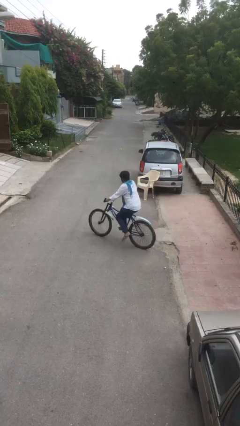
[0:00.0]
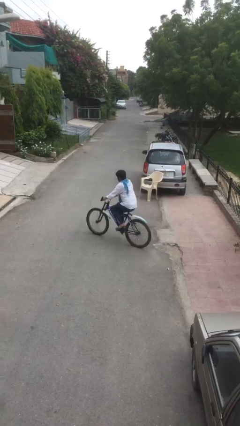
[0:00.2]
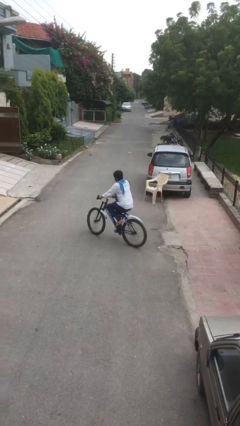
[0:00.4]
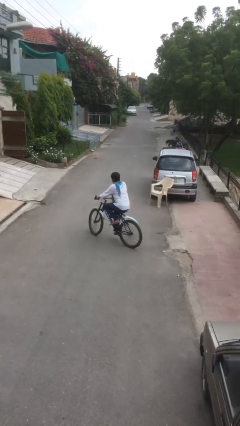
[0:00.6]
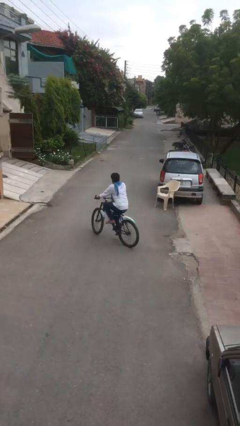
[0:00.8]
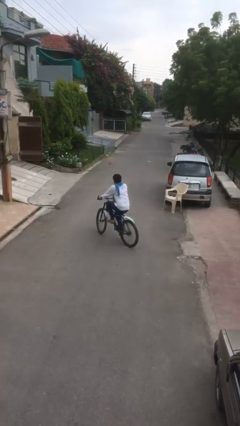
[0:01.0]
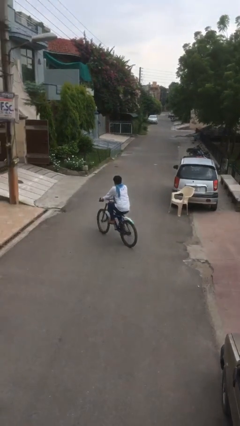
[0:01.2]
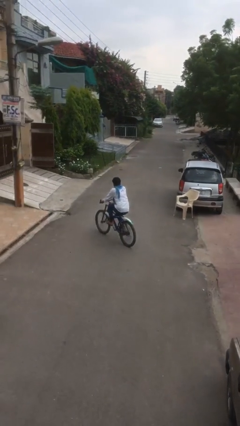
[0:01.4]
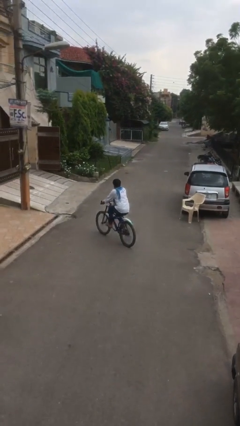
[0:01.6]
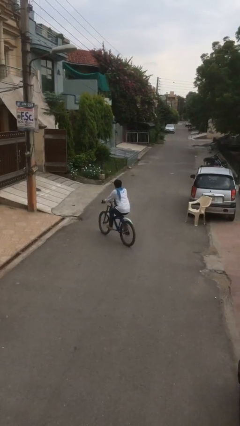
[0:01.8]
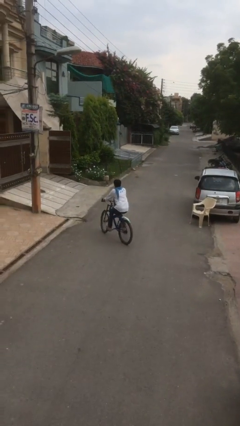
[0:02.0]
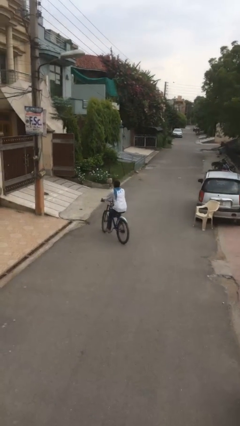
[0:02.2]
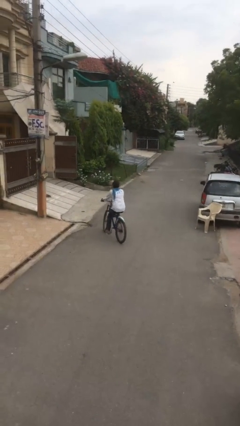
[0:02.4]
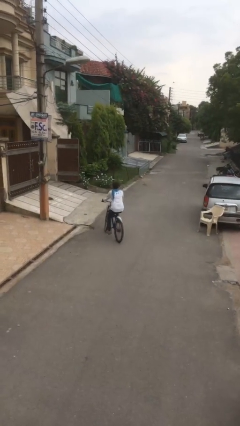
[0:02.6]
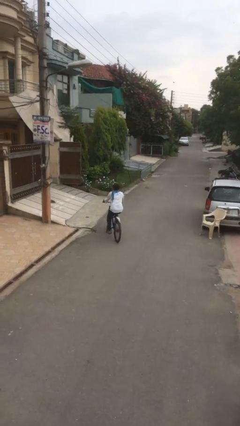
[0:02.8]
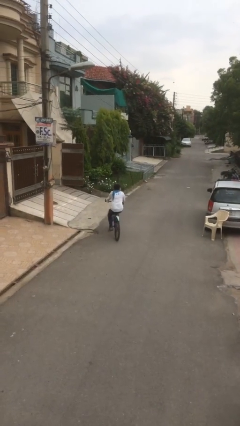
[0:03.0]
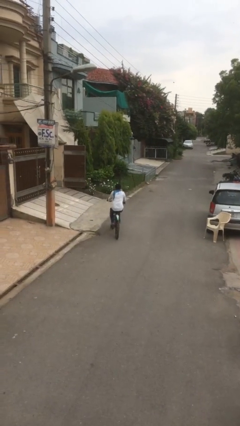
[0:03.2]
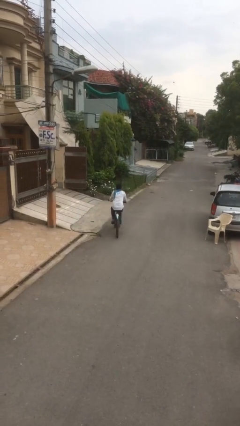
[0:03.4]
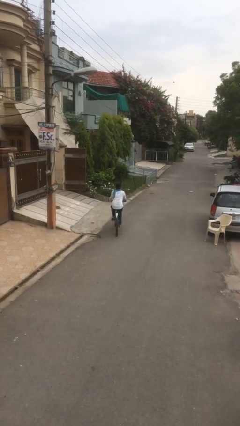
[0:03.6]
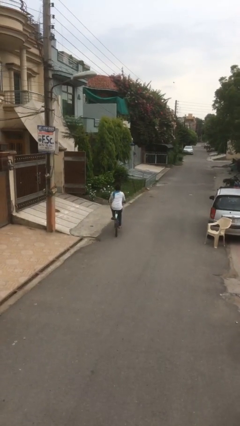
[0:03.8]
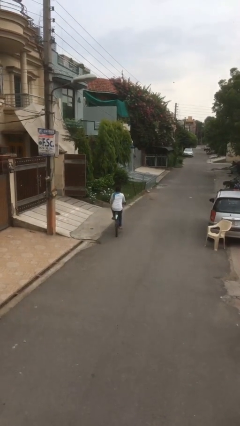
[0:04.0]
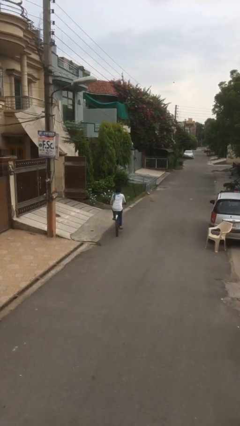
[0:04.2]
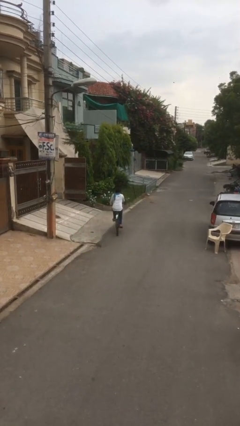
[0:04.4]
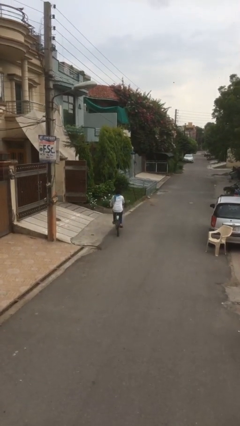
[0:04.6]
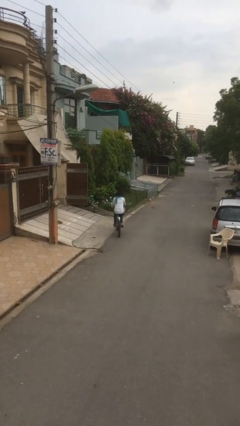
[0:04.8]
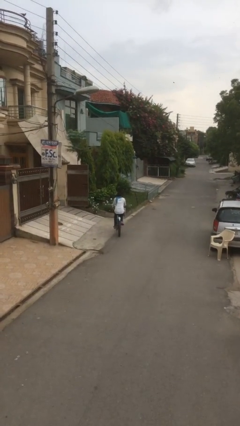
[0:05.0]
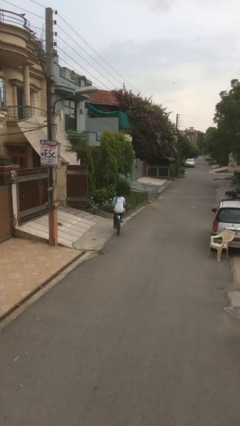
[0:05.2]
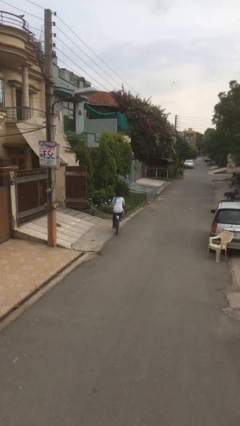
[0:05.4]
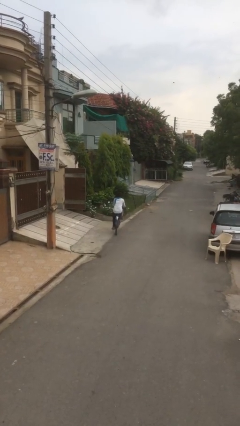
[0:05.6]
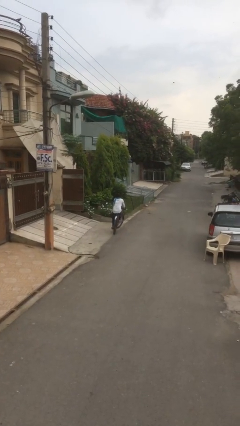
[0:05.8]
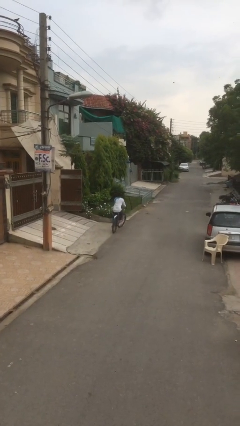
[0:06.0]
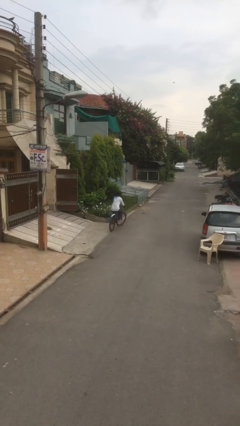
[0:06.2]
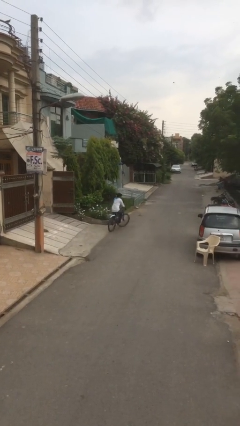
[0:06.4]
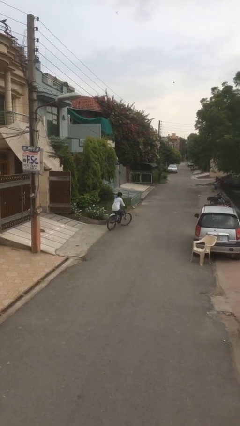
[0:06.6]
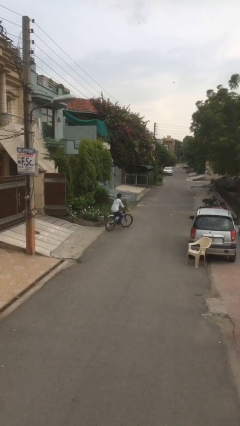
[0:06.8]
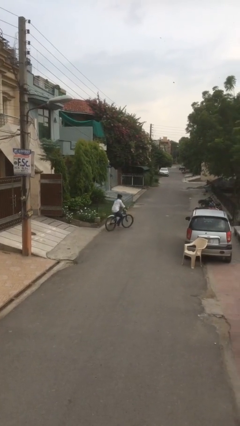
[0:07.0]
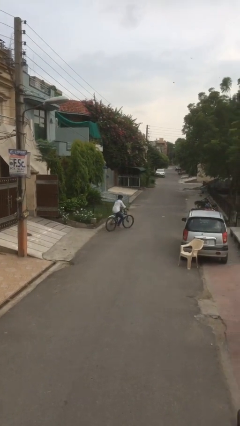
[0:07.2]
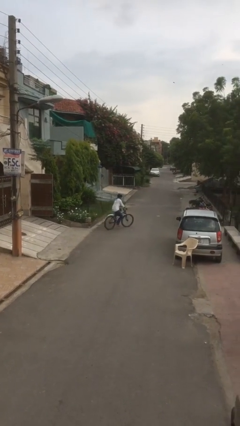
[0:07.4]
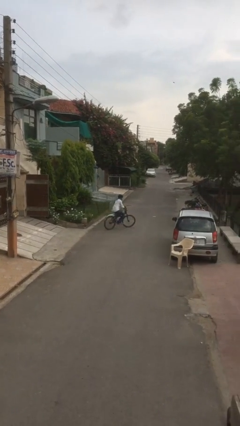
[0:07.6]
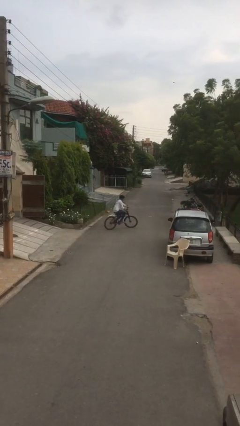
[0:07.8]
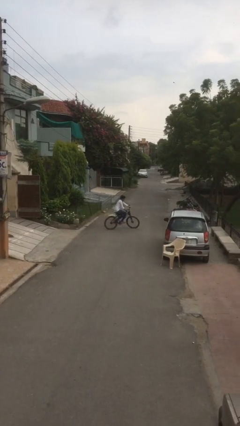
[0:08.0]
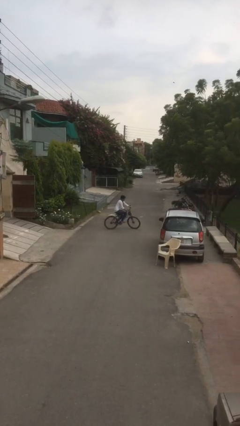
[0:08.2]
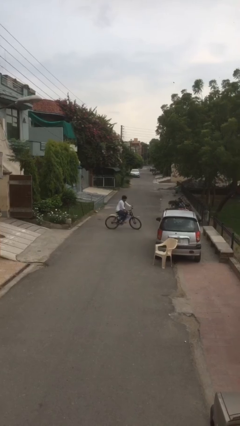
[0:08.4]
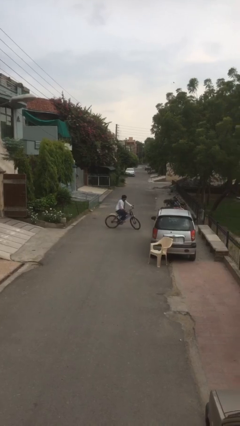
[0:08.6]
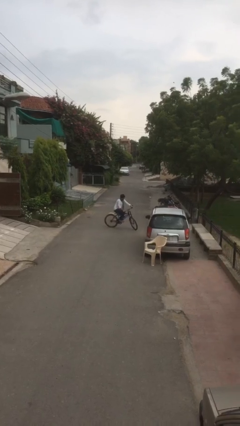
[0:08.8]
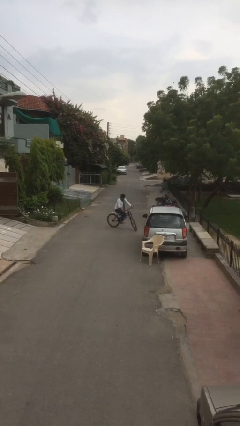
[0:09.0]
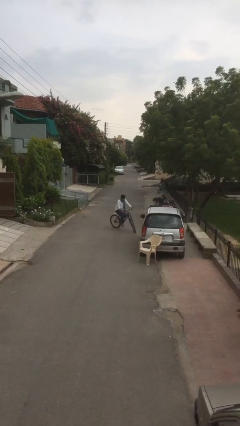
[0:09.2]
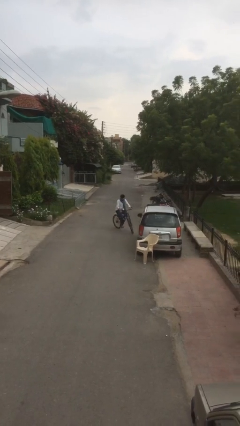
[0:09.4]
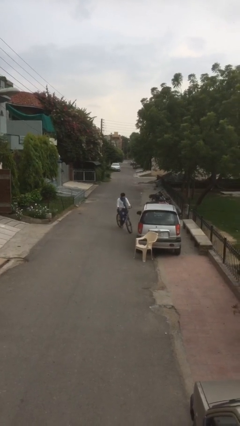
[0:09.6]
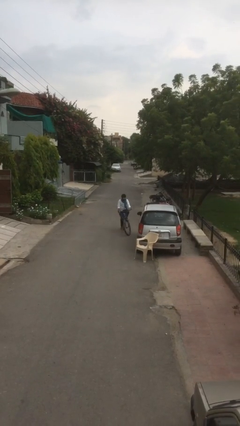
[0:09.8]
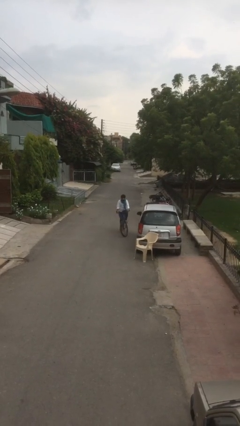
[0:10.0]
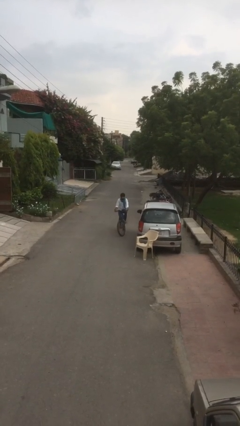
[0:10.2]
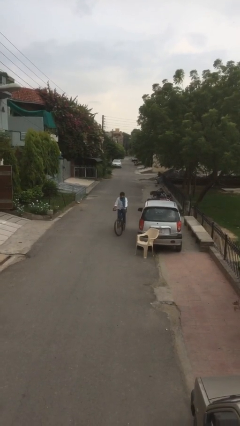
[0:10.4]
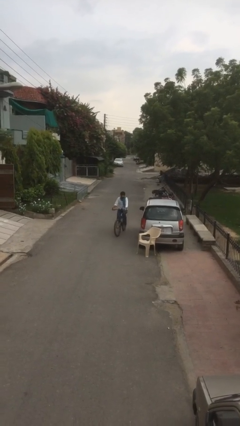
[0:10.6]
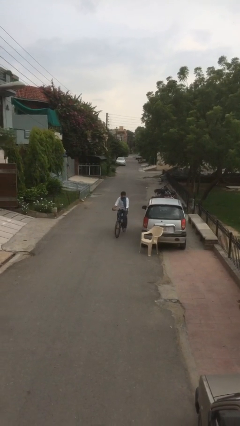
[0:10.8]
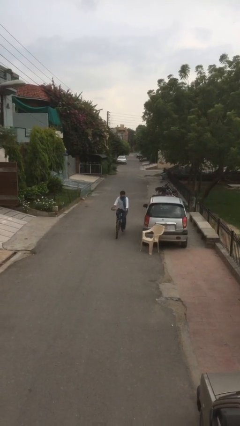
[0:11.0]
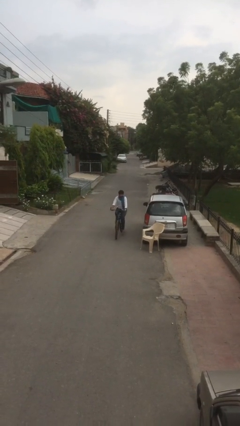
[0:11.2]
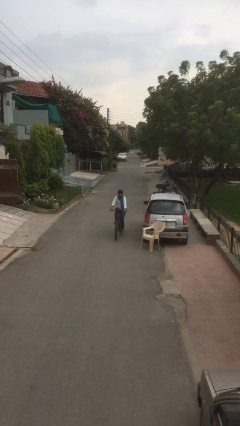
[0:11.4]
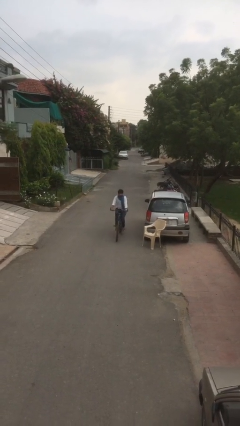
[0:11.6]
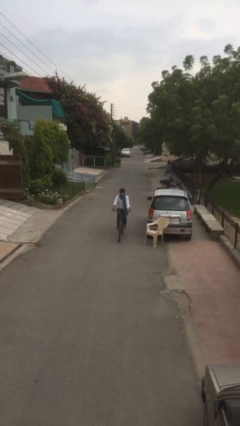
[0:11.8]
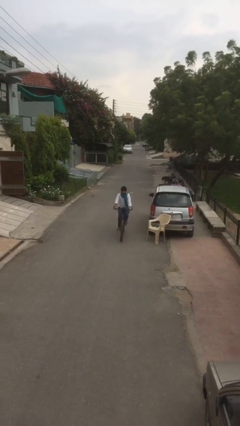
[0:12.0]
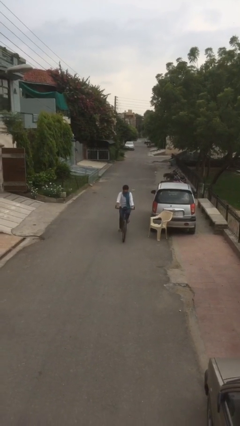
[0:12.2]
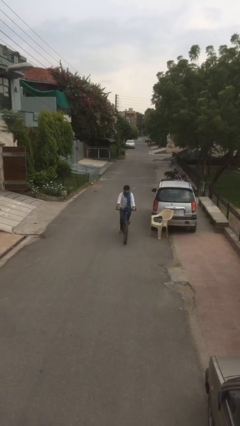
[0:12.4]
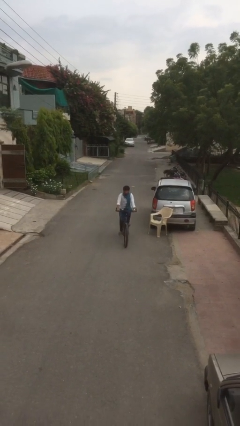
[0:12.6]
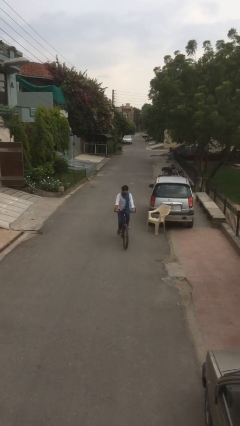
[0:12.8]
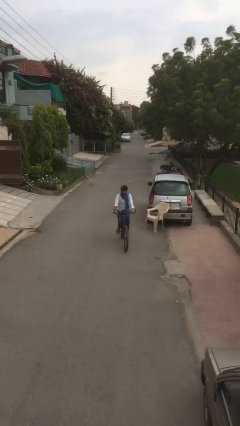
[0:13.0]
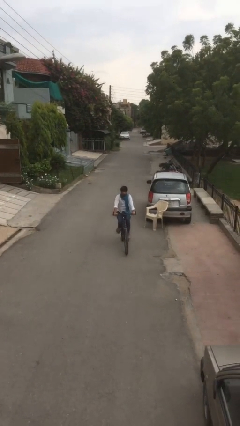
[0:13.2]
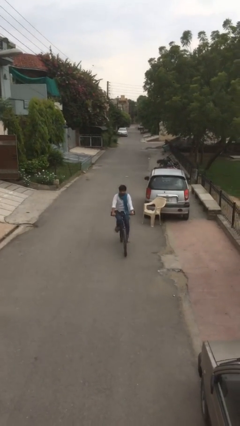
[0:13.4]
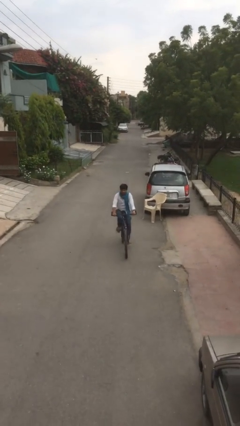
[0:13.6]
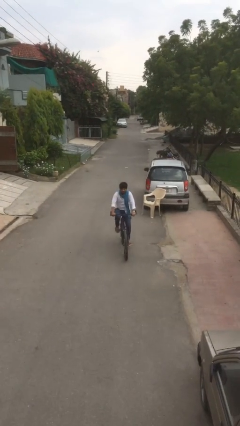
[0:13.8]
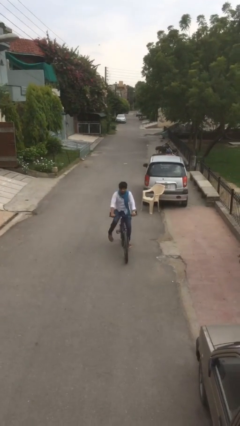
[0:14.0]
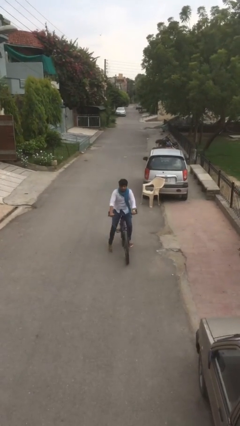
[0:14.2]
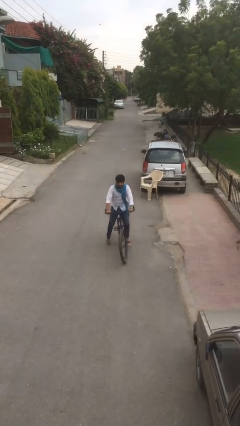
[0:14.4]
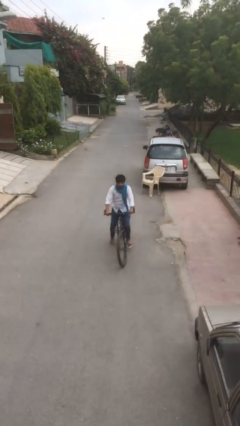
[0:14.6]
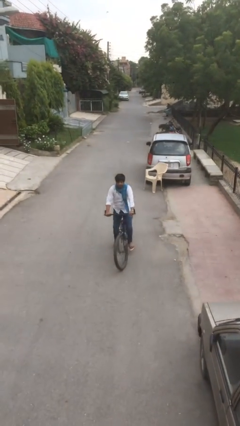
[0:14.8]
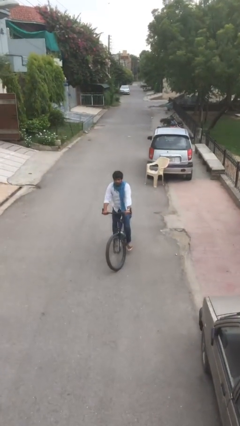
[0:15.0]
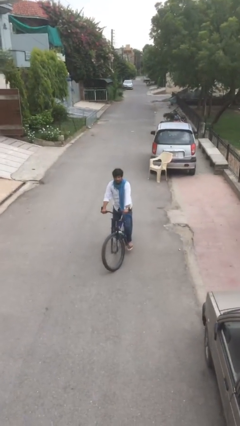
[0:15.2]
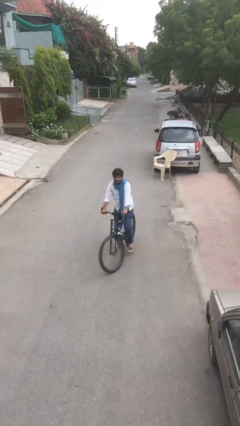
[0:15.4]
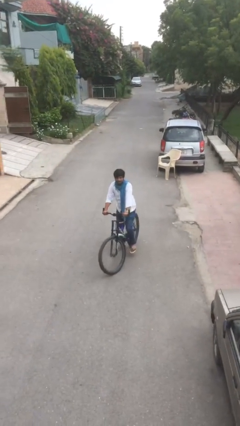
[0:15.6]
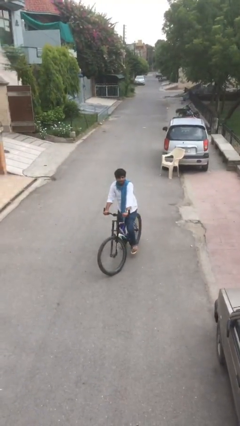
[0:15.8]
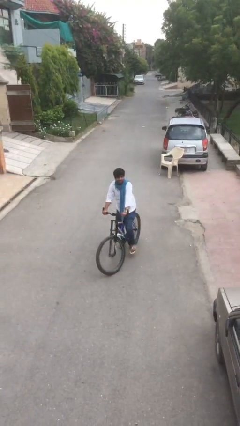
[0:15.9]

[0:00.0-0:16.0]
person rides bicycle

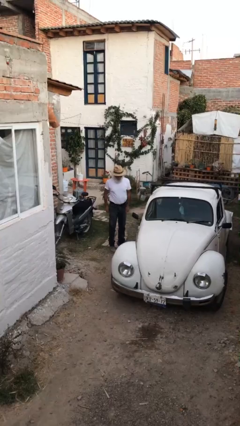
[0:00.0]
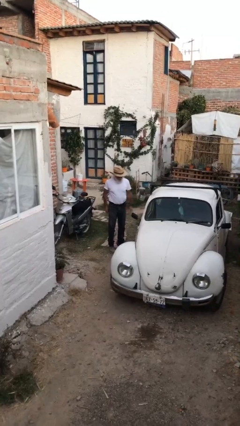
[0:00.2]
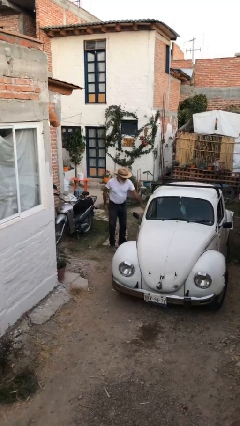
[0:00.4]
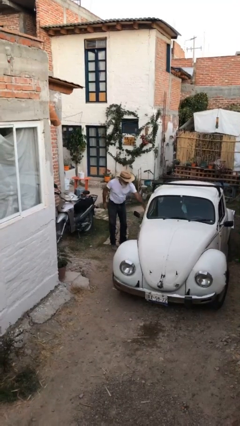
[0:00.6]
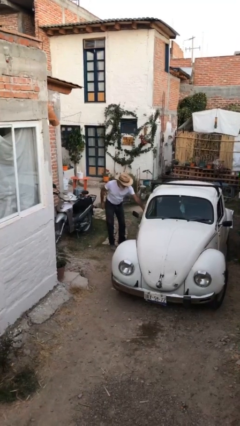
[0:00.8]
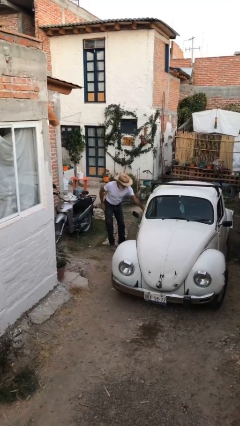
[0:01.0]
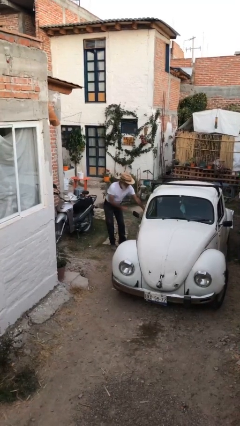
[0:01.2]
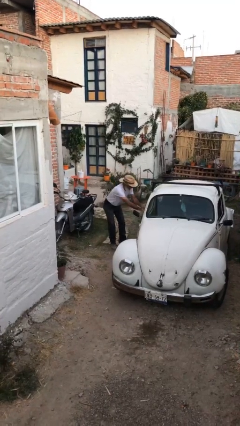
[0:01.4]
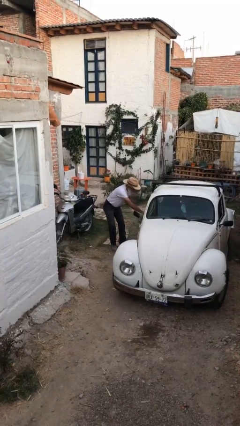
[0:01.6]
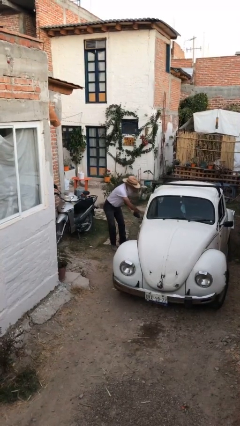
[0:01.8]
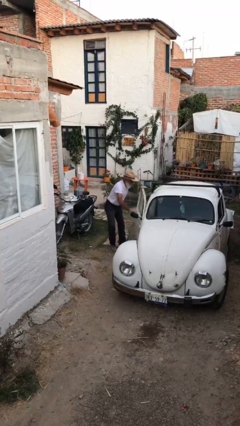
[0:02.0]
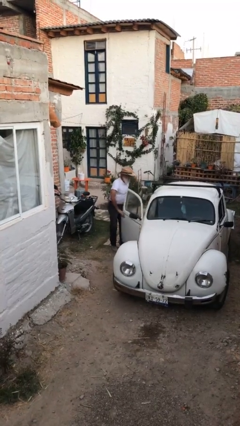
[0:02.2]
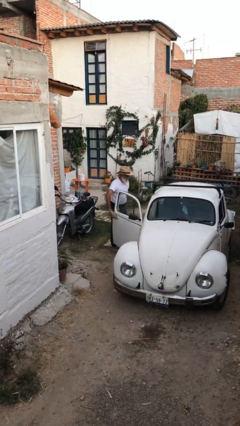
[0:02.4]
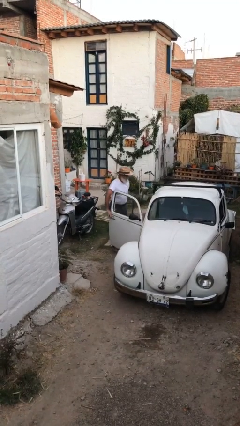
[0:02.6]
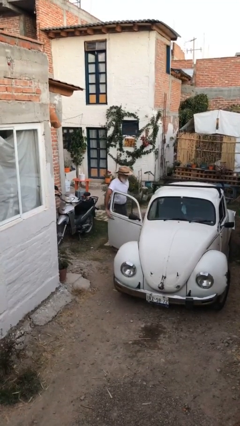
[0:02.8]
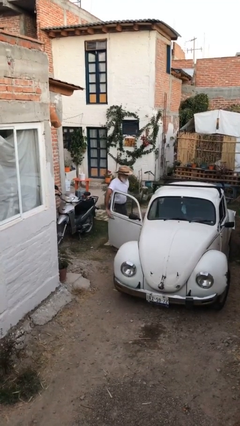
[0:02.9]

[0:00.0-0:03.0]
person opens car door
